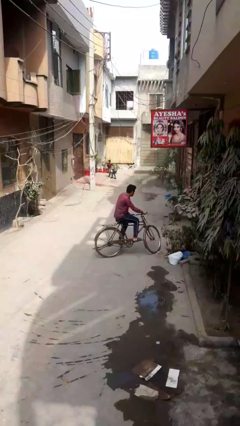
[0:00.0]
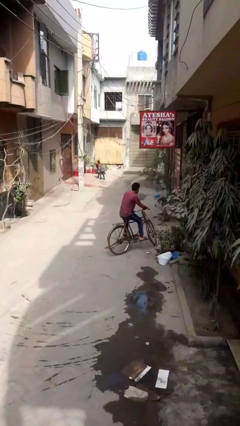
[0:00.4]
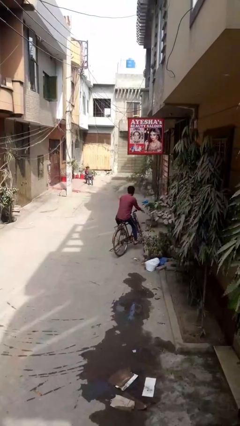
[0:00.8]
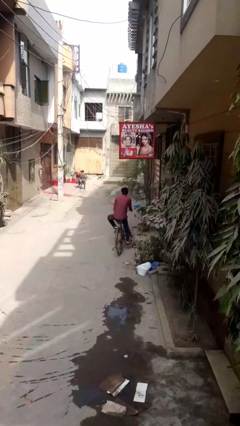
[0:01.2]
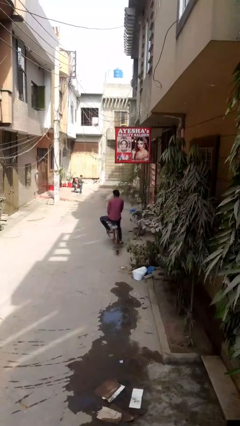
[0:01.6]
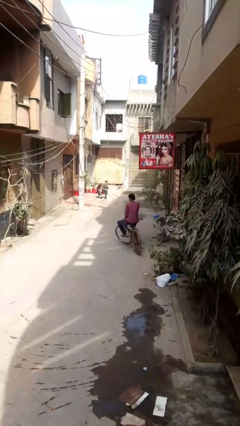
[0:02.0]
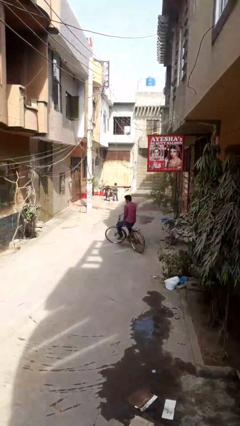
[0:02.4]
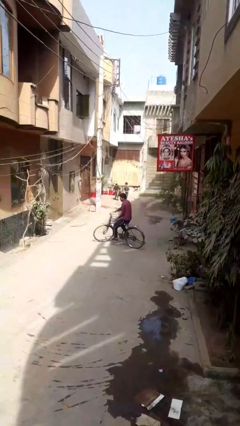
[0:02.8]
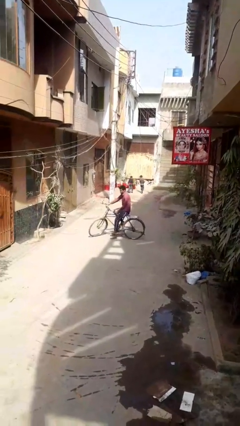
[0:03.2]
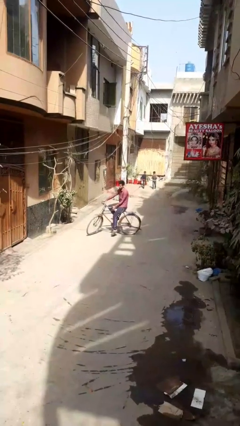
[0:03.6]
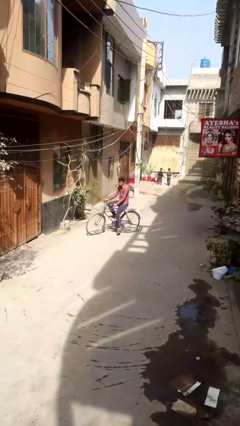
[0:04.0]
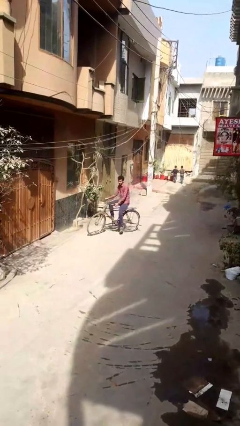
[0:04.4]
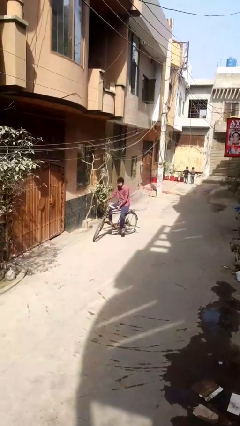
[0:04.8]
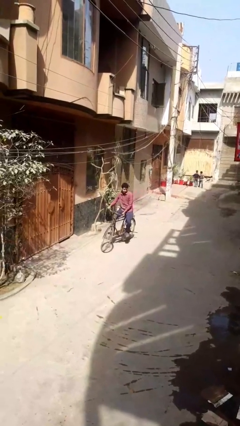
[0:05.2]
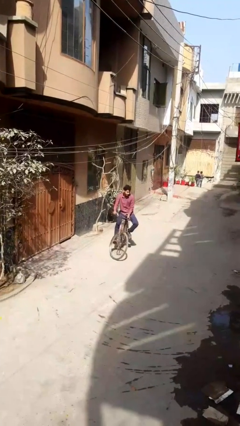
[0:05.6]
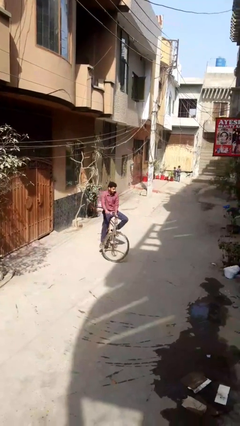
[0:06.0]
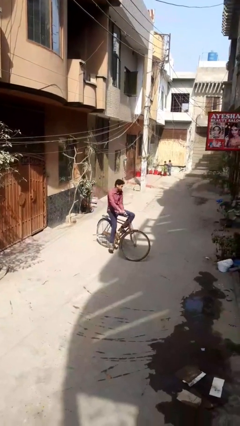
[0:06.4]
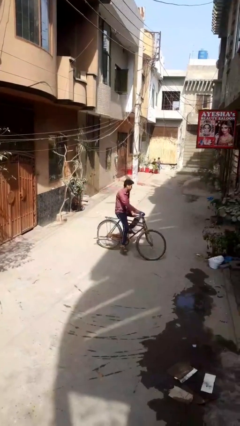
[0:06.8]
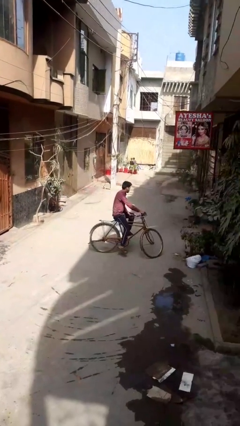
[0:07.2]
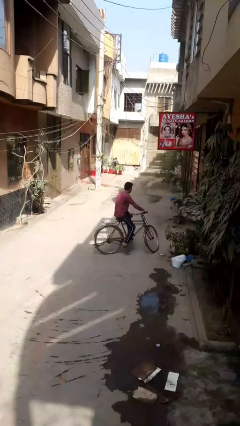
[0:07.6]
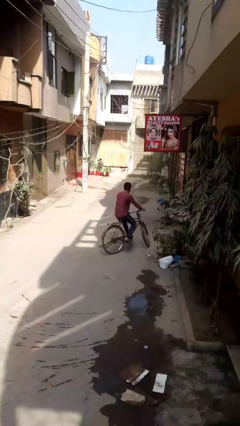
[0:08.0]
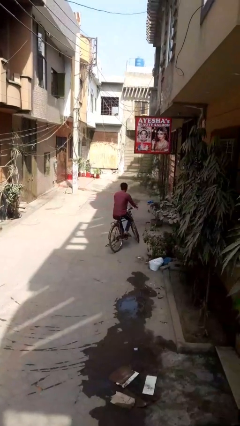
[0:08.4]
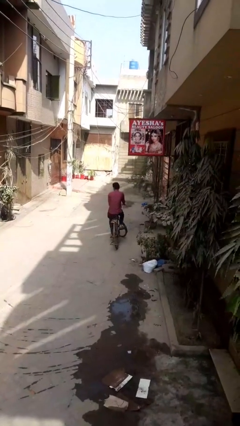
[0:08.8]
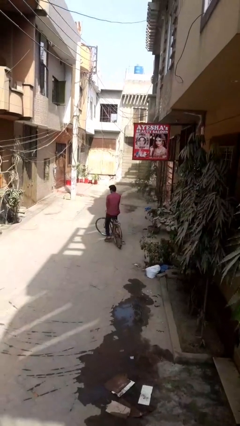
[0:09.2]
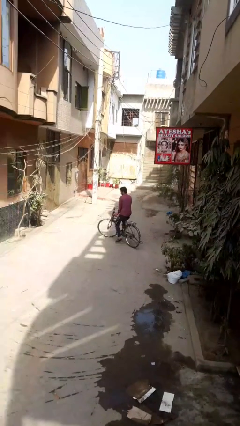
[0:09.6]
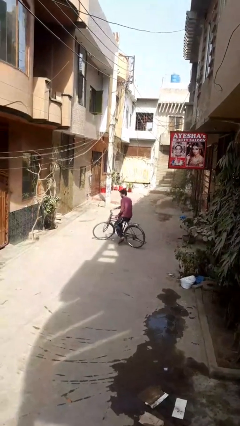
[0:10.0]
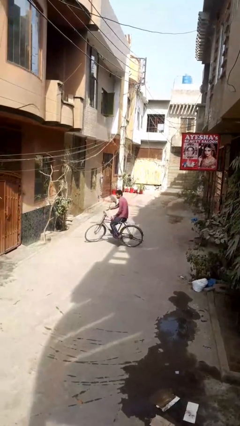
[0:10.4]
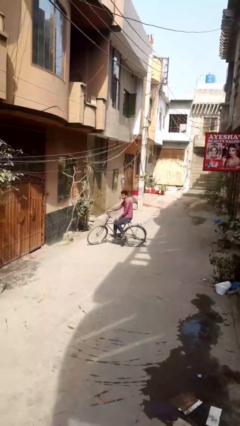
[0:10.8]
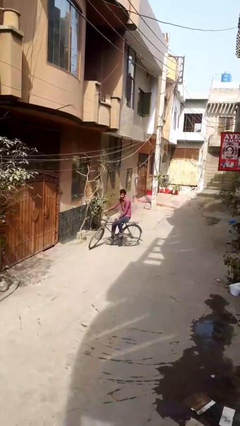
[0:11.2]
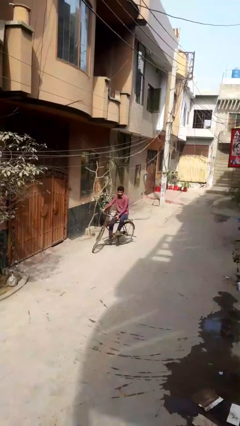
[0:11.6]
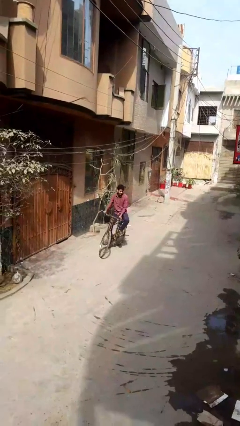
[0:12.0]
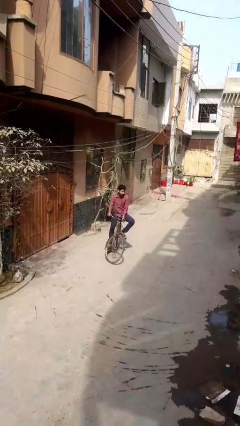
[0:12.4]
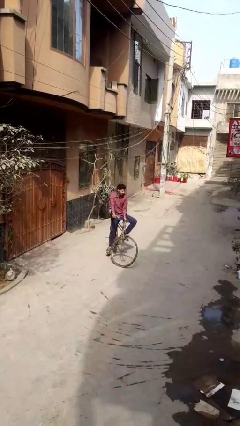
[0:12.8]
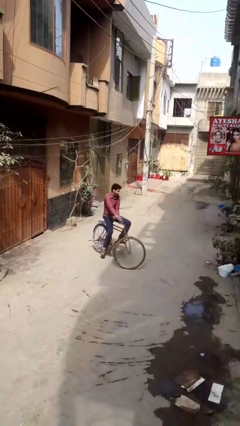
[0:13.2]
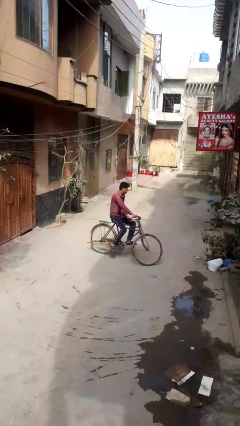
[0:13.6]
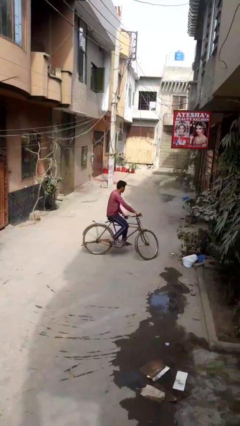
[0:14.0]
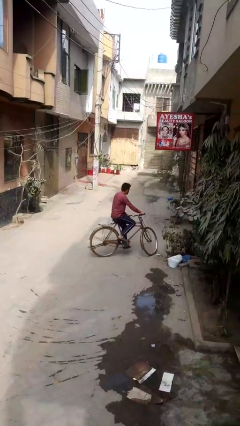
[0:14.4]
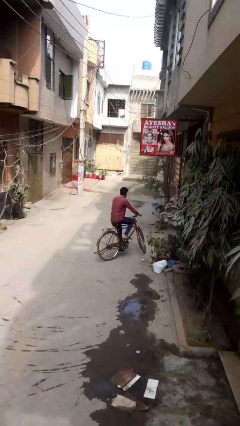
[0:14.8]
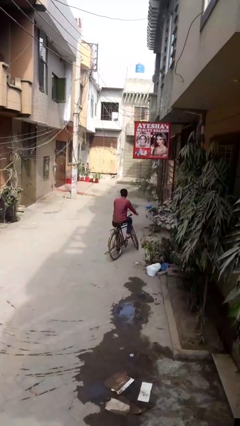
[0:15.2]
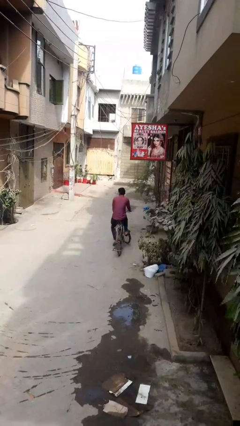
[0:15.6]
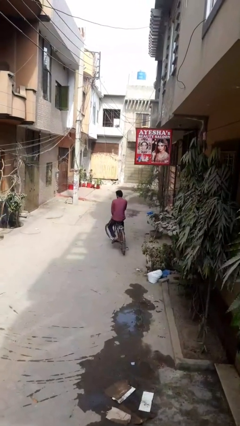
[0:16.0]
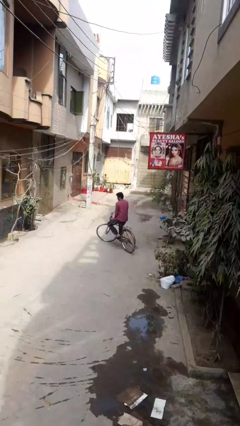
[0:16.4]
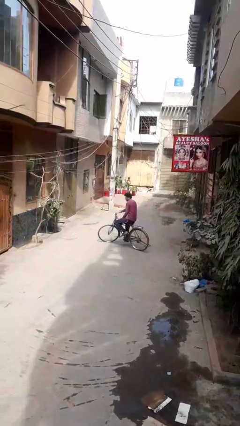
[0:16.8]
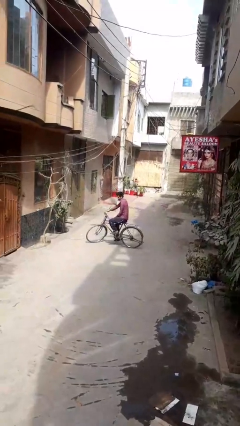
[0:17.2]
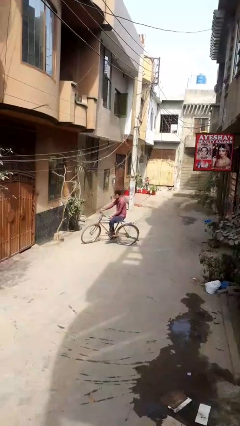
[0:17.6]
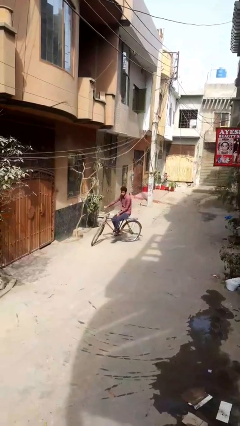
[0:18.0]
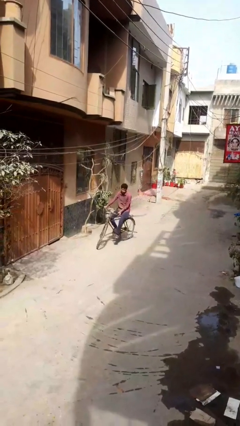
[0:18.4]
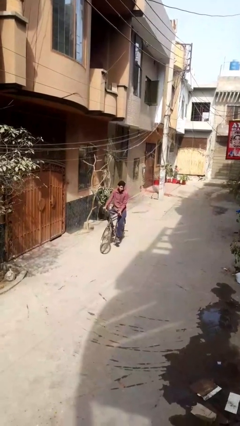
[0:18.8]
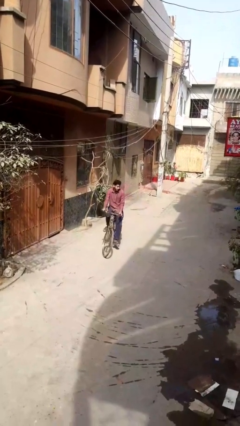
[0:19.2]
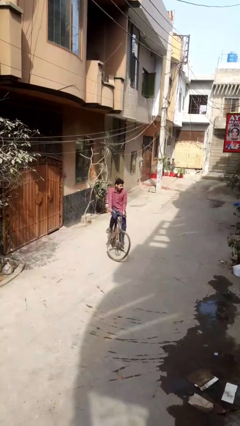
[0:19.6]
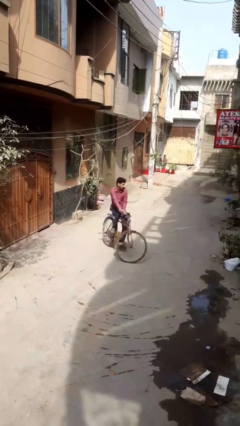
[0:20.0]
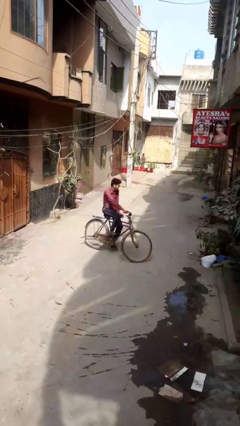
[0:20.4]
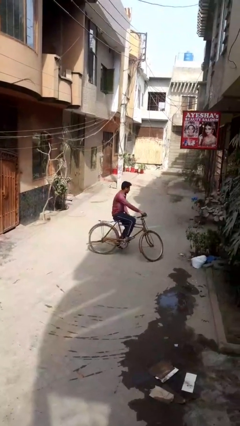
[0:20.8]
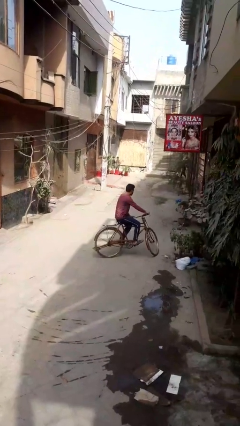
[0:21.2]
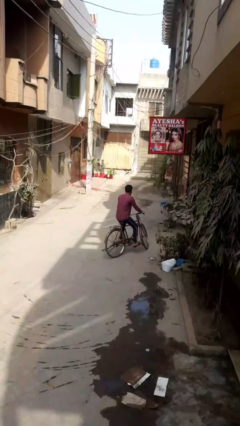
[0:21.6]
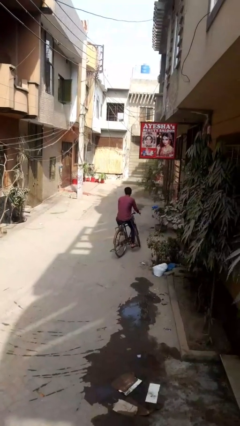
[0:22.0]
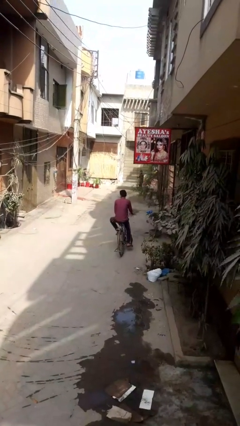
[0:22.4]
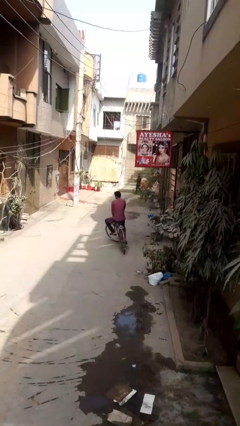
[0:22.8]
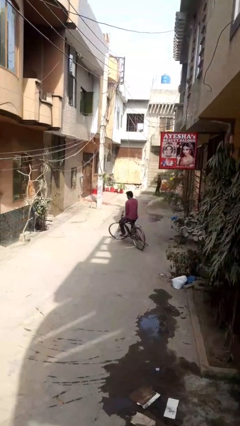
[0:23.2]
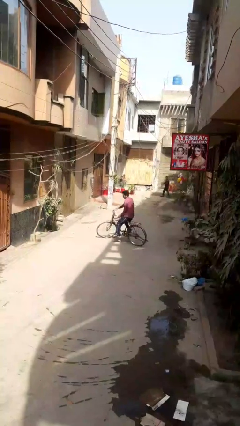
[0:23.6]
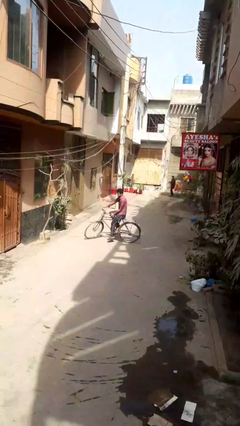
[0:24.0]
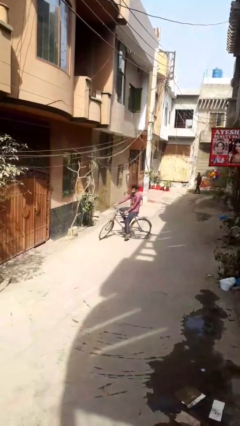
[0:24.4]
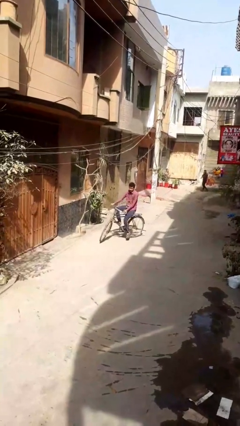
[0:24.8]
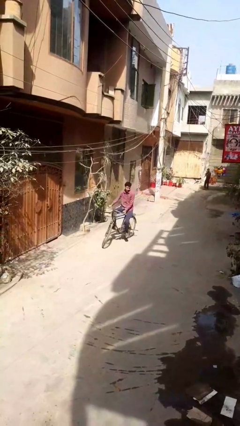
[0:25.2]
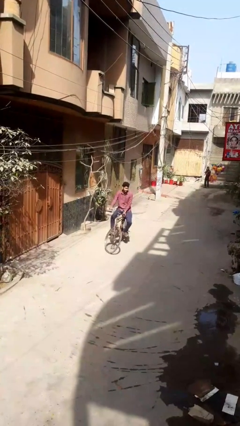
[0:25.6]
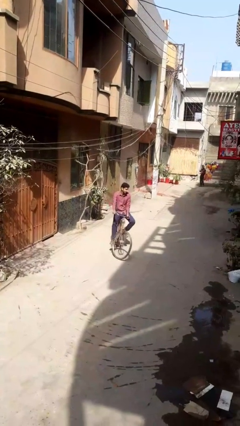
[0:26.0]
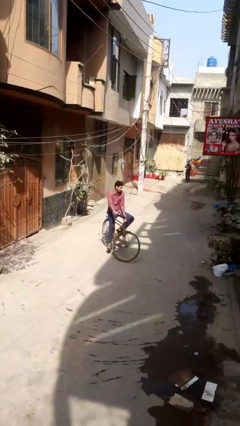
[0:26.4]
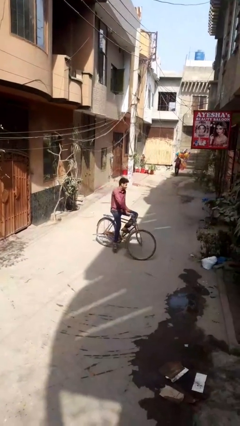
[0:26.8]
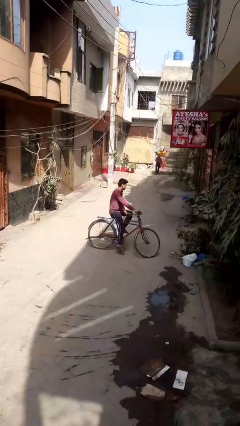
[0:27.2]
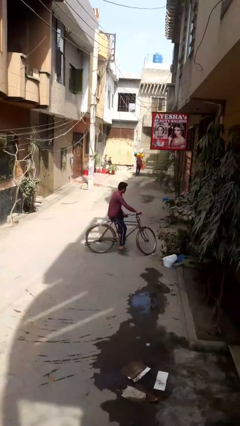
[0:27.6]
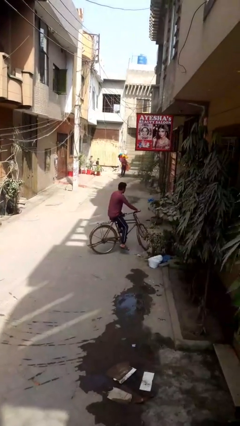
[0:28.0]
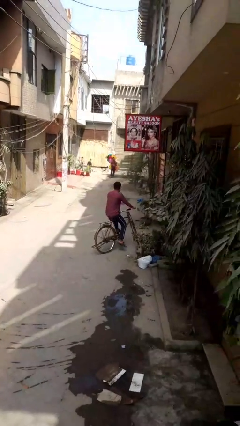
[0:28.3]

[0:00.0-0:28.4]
person rides bicycle

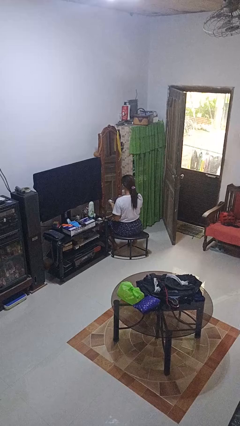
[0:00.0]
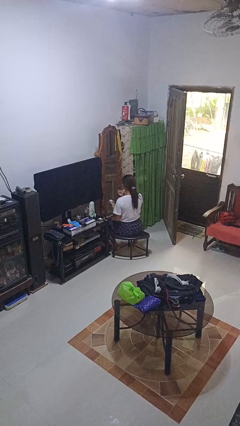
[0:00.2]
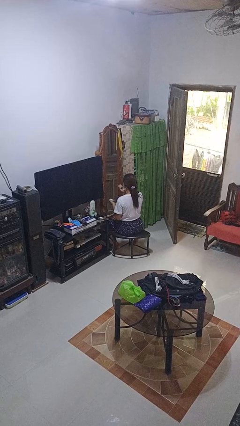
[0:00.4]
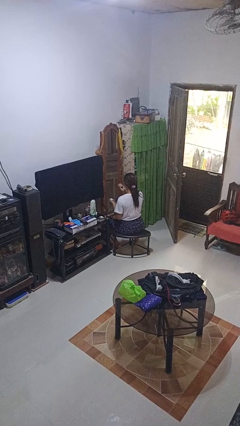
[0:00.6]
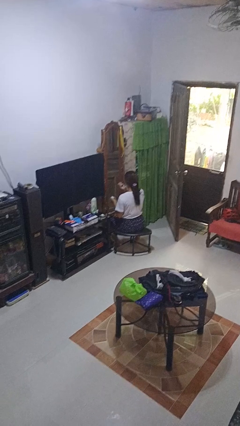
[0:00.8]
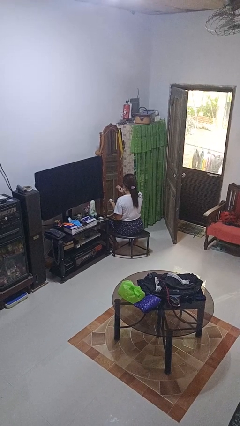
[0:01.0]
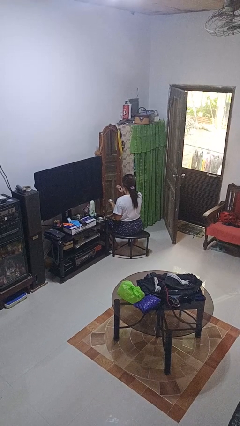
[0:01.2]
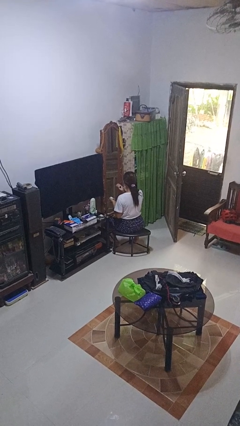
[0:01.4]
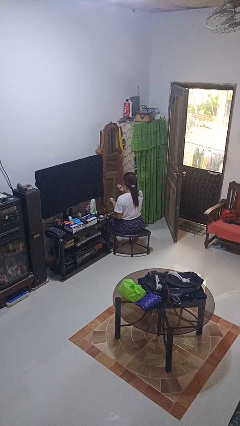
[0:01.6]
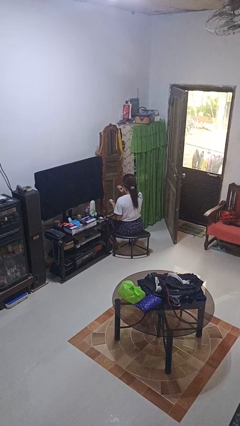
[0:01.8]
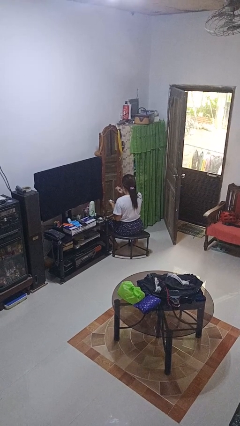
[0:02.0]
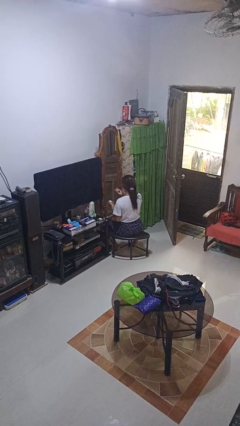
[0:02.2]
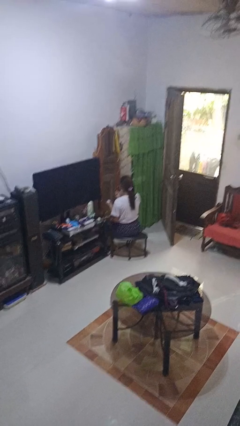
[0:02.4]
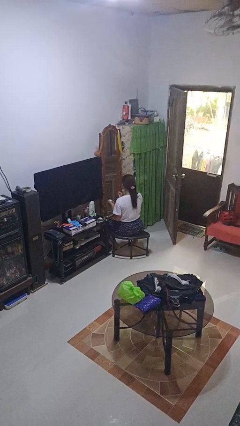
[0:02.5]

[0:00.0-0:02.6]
person applies eye makeup

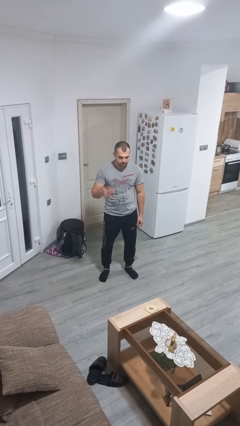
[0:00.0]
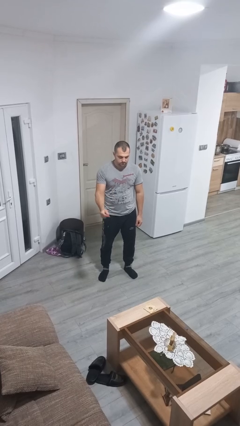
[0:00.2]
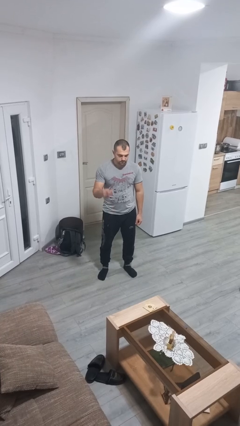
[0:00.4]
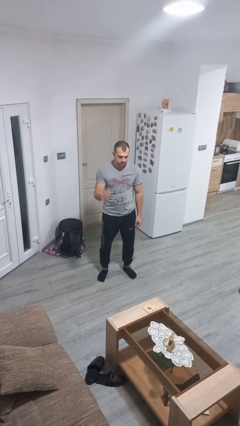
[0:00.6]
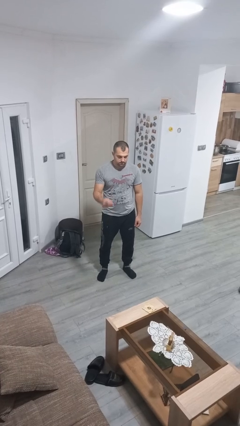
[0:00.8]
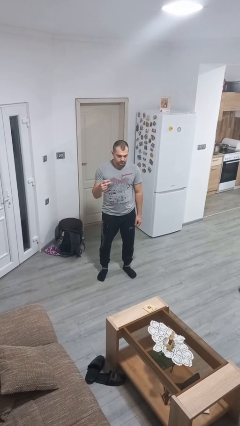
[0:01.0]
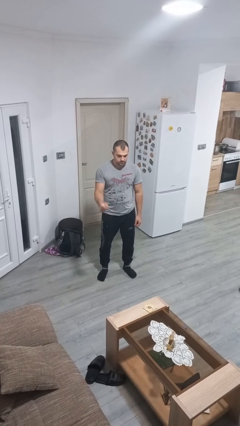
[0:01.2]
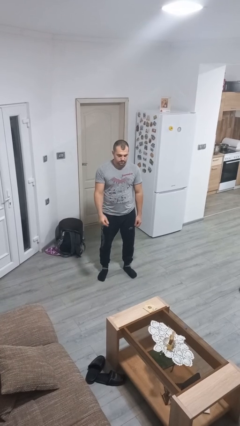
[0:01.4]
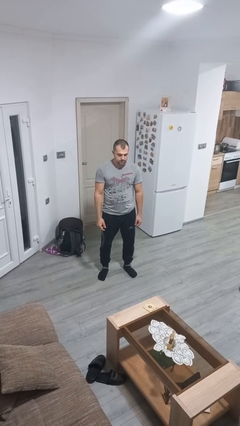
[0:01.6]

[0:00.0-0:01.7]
person snaps fingers
